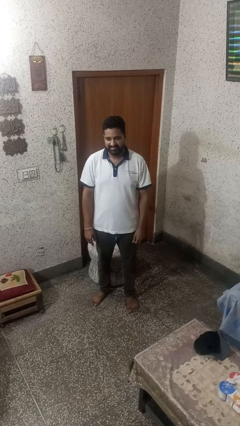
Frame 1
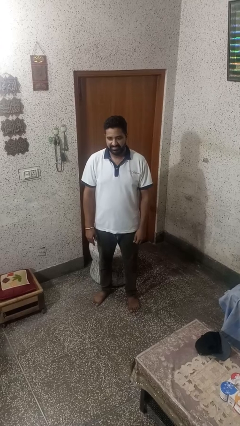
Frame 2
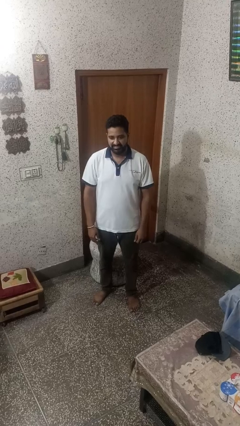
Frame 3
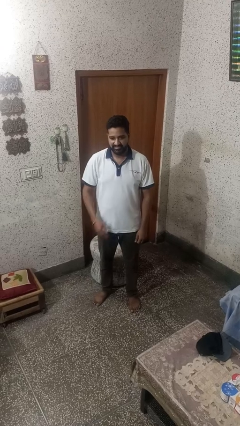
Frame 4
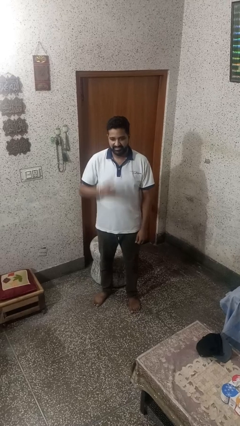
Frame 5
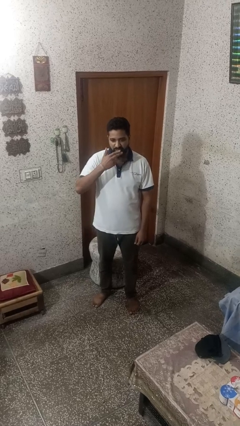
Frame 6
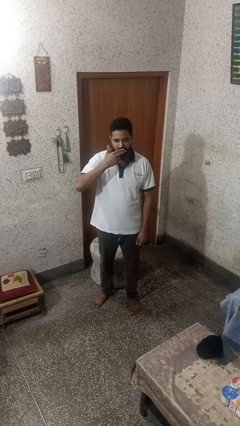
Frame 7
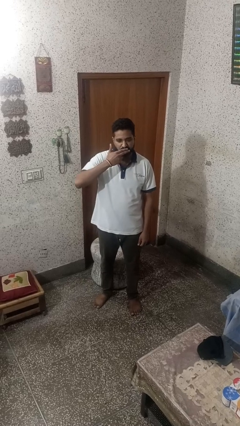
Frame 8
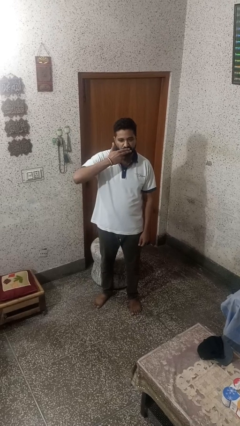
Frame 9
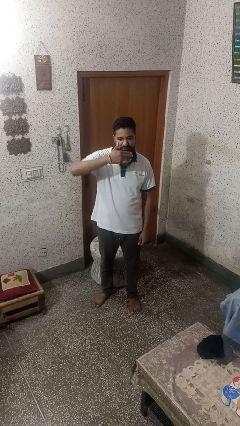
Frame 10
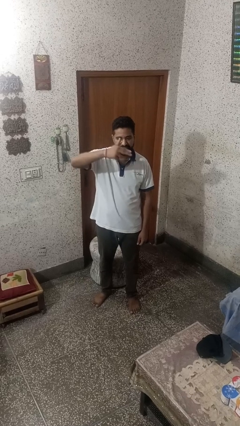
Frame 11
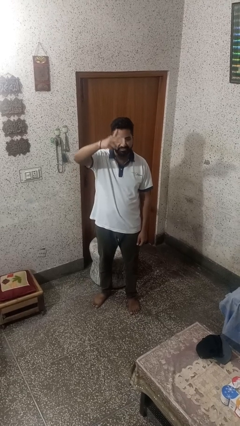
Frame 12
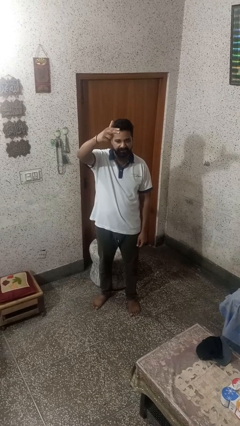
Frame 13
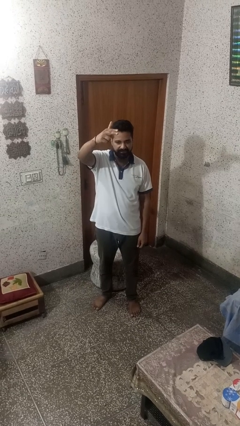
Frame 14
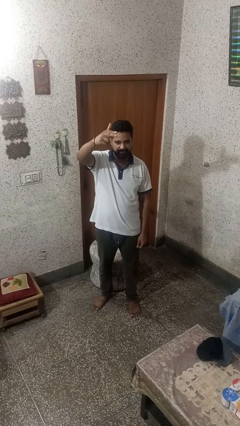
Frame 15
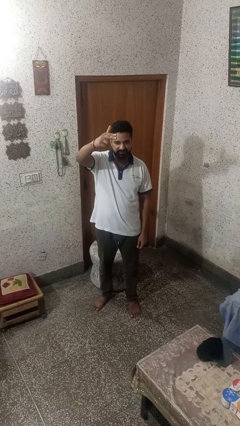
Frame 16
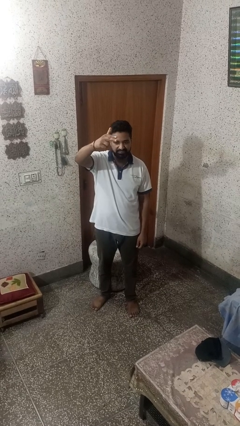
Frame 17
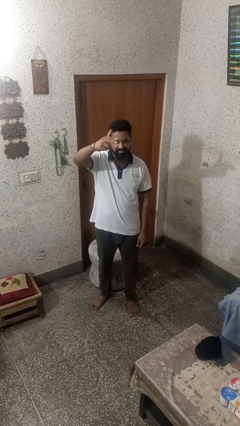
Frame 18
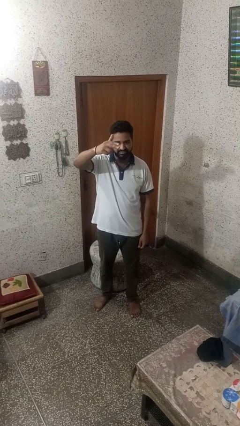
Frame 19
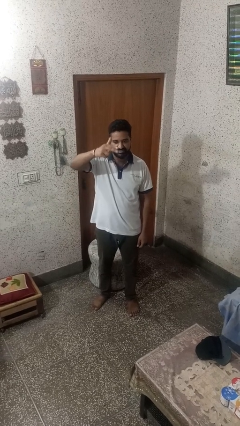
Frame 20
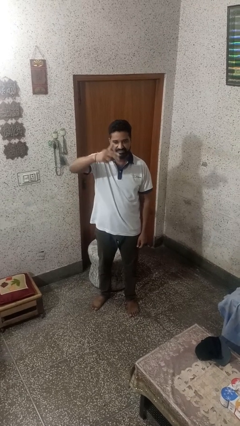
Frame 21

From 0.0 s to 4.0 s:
person gestures blow kiss

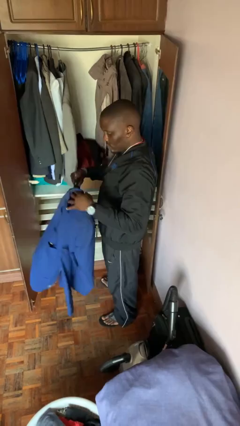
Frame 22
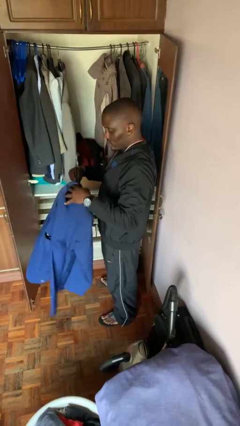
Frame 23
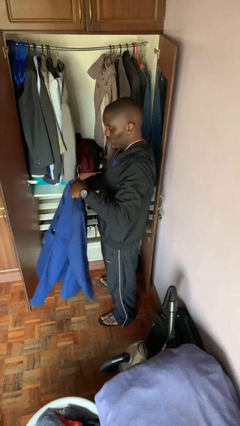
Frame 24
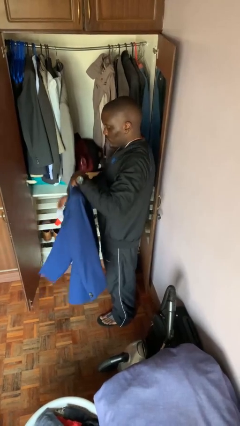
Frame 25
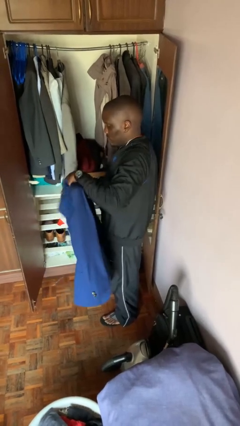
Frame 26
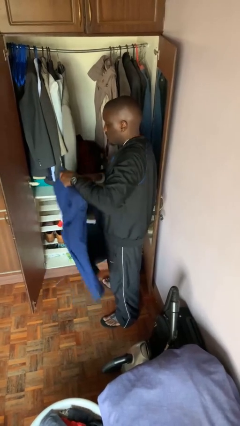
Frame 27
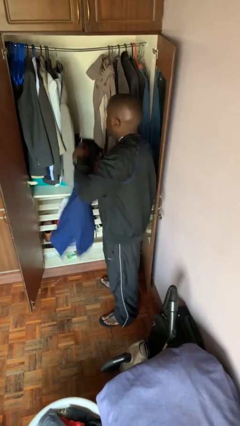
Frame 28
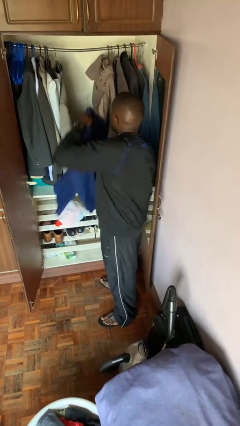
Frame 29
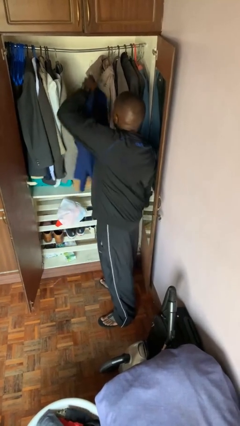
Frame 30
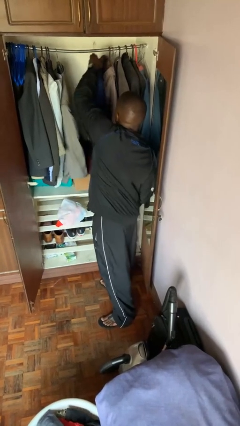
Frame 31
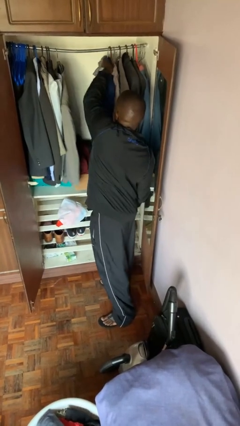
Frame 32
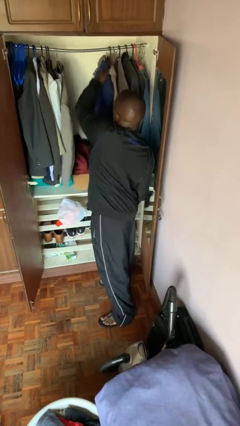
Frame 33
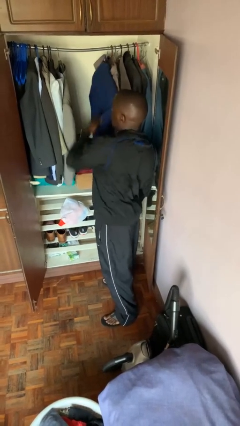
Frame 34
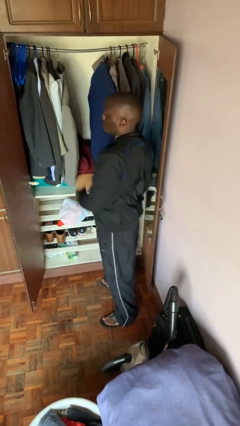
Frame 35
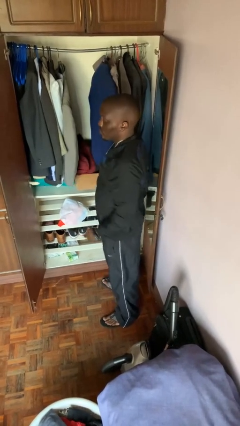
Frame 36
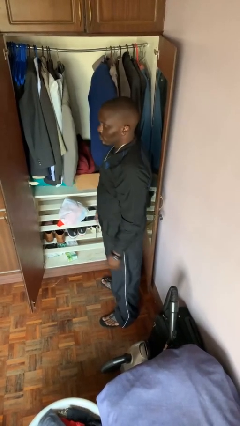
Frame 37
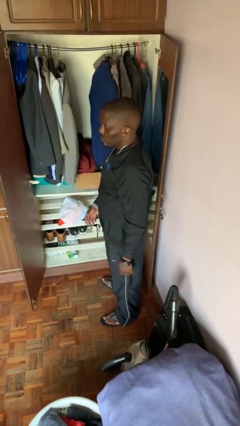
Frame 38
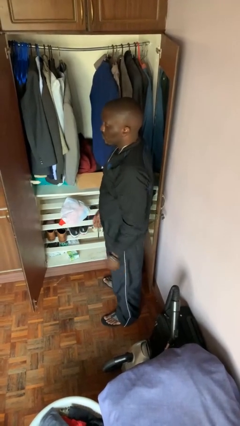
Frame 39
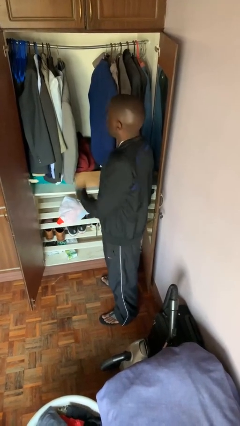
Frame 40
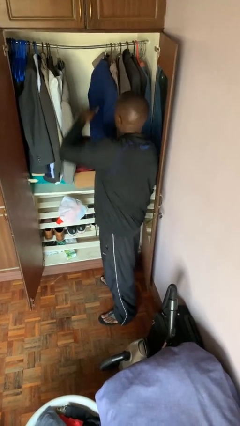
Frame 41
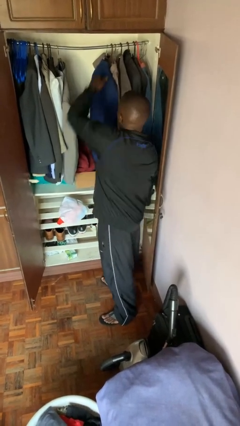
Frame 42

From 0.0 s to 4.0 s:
person puts clothes into closet

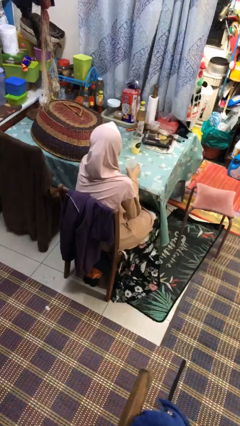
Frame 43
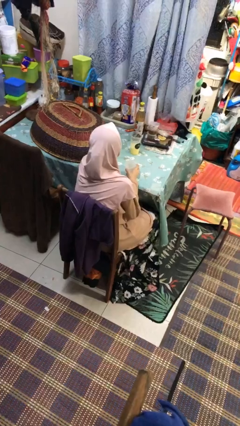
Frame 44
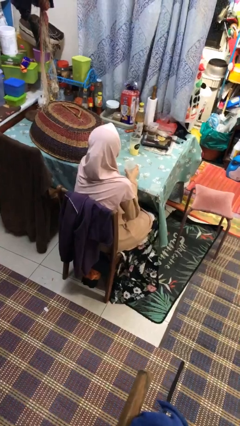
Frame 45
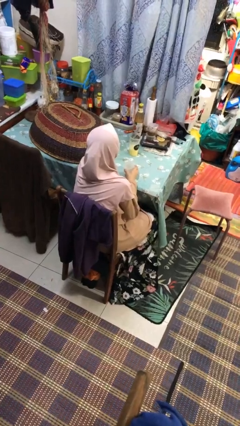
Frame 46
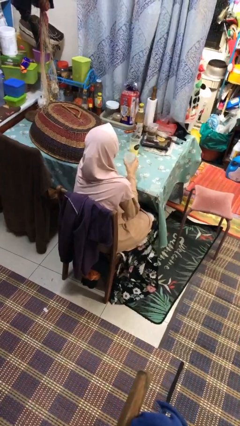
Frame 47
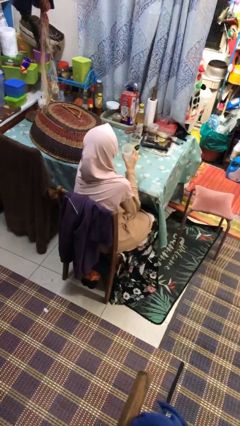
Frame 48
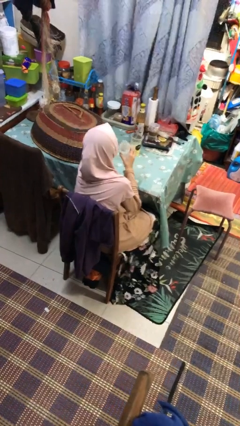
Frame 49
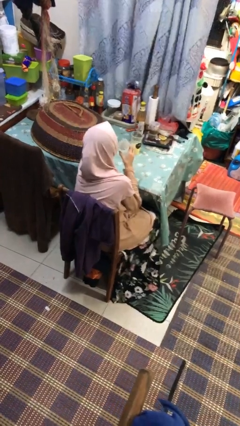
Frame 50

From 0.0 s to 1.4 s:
person picks up object from table

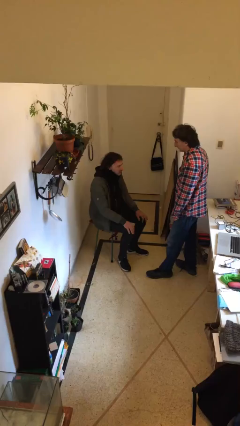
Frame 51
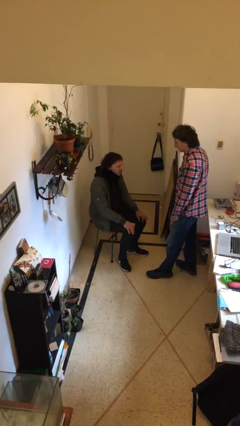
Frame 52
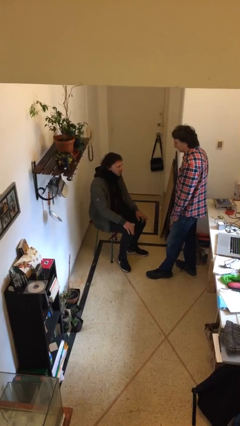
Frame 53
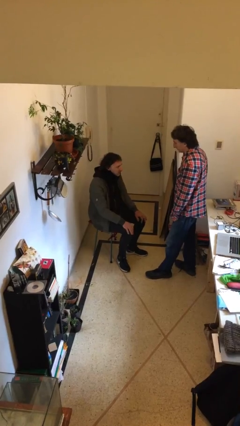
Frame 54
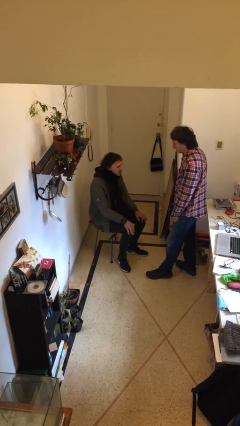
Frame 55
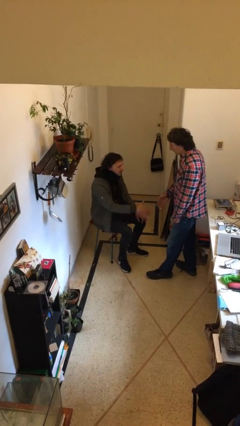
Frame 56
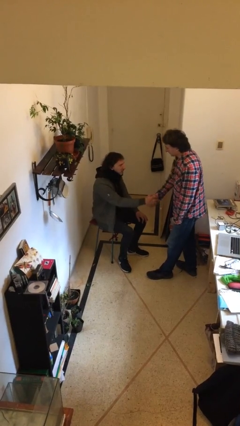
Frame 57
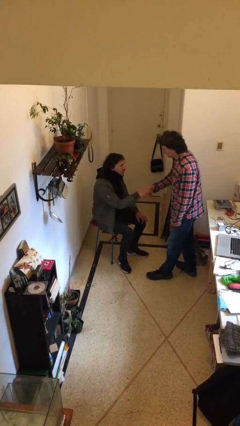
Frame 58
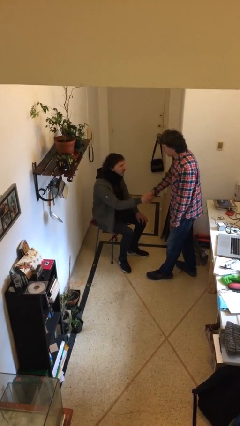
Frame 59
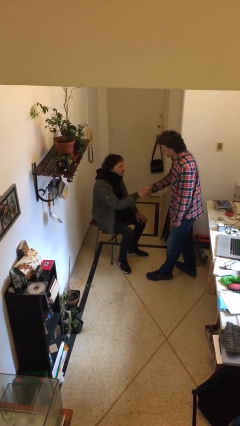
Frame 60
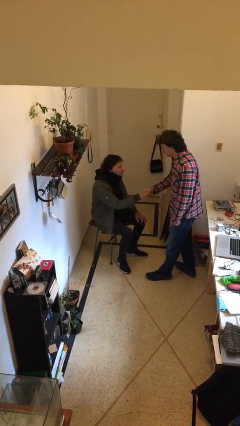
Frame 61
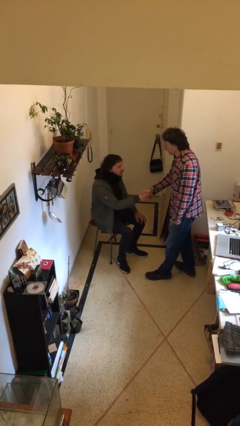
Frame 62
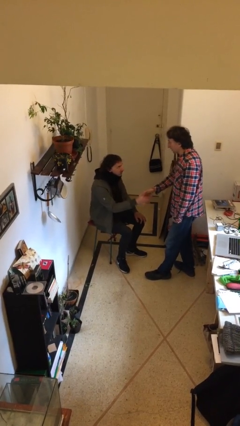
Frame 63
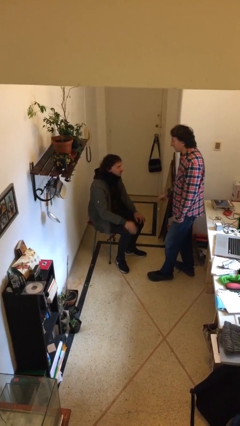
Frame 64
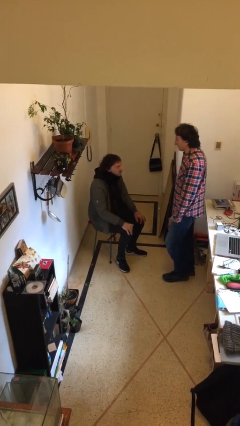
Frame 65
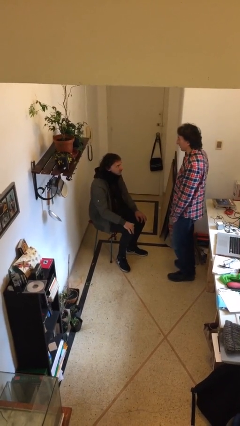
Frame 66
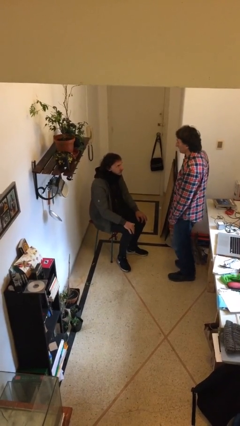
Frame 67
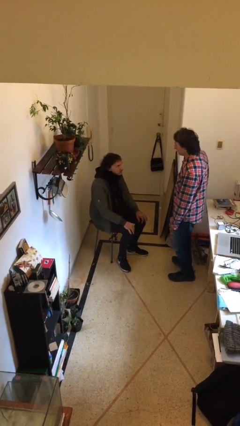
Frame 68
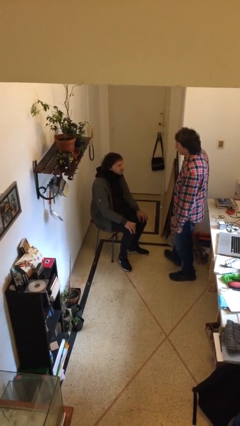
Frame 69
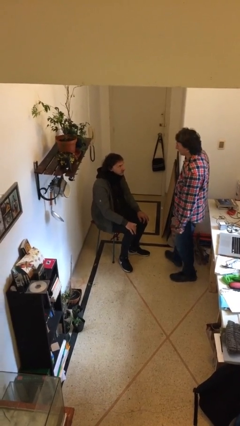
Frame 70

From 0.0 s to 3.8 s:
person shakes hand

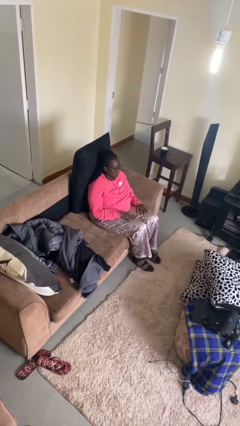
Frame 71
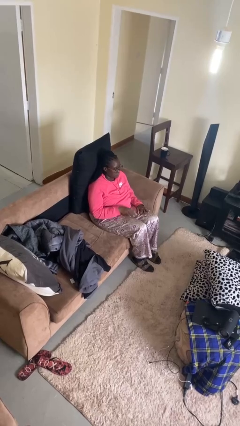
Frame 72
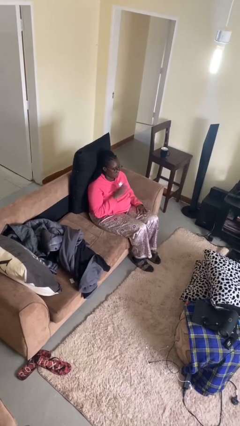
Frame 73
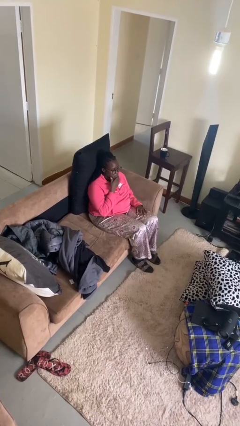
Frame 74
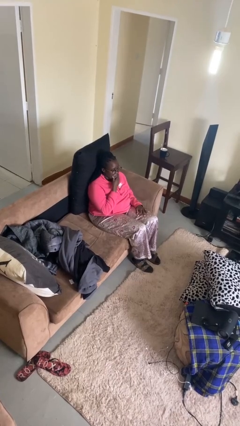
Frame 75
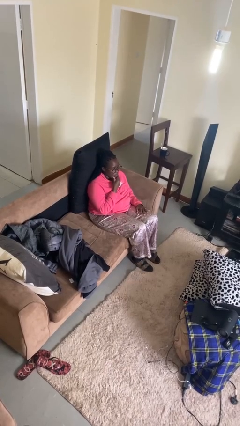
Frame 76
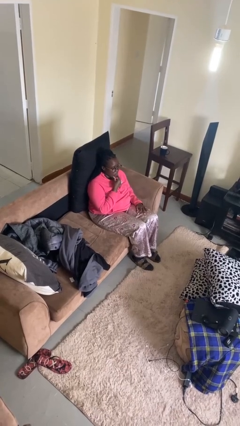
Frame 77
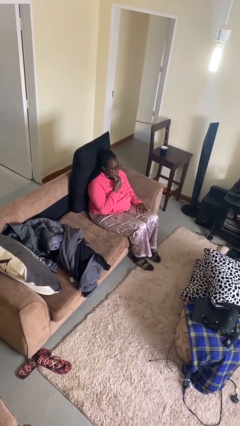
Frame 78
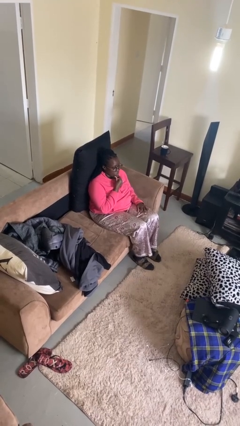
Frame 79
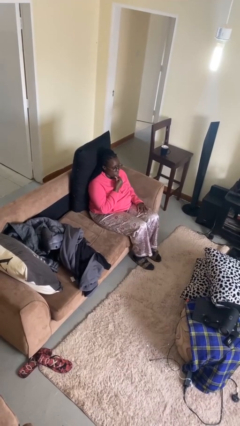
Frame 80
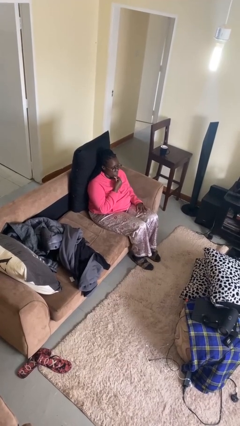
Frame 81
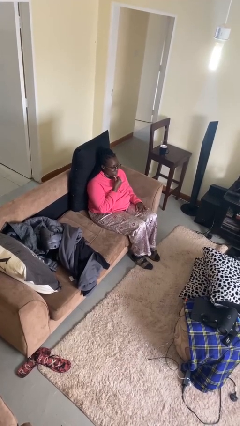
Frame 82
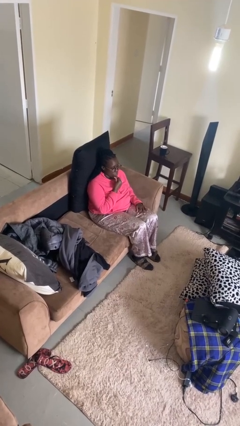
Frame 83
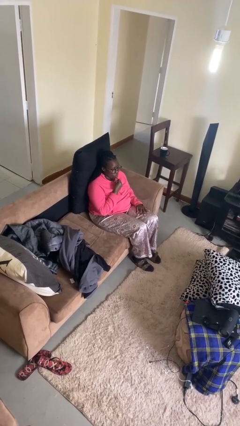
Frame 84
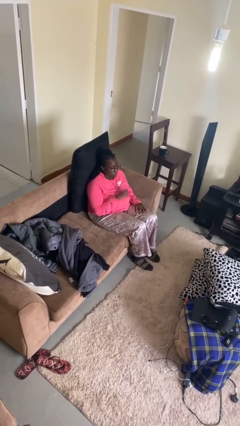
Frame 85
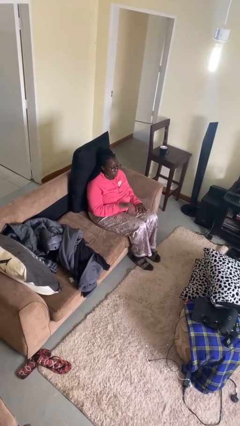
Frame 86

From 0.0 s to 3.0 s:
person strokes chin

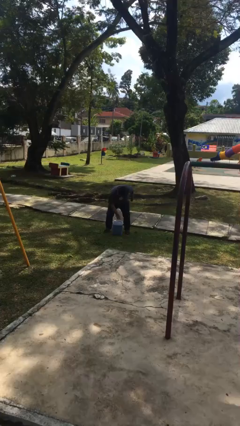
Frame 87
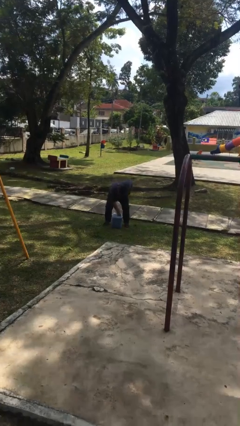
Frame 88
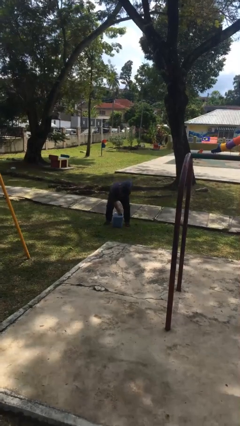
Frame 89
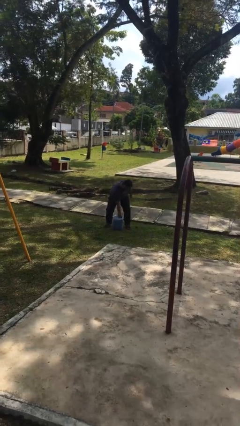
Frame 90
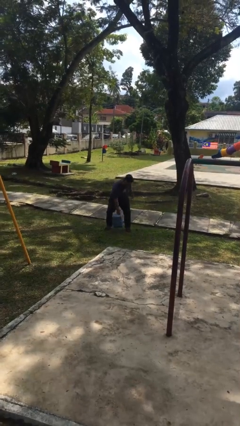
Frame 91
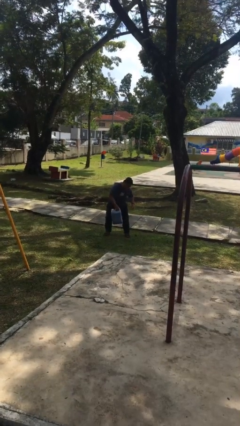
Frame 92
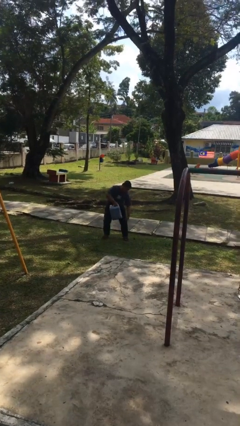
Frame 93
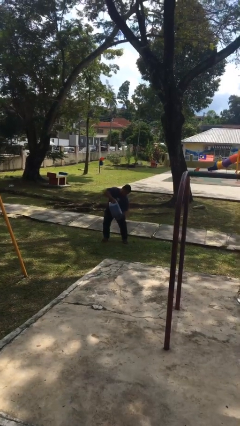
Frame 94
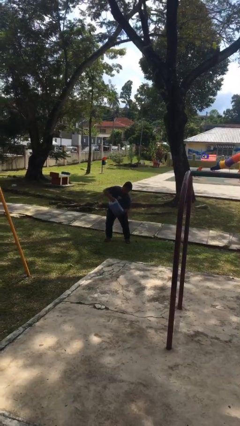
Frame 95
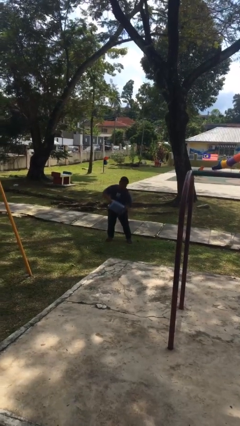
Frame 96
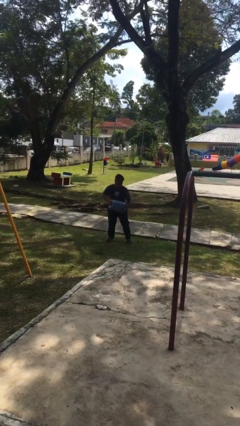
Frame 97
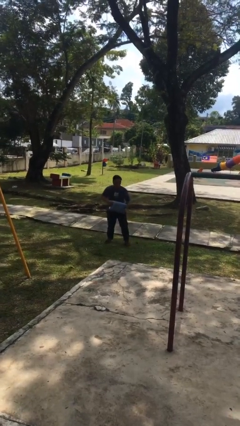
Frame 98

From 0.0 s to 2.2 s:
person picks up object from floor
